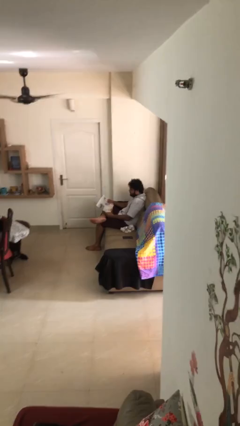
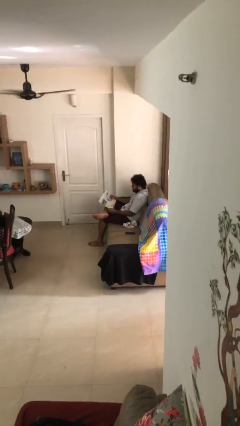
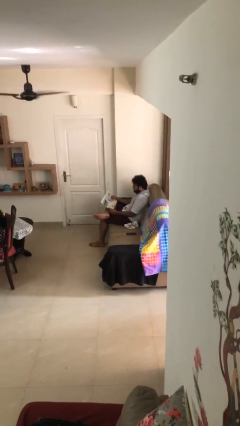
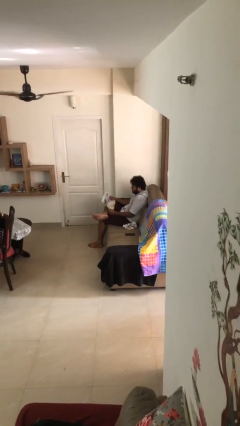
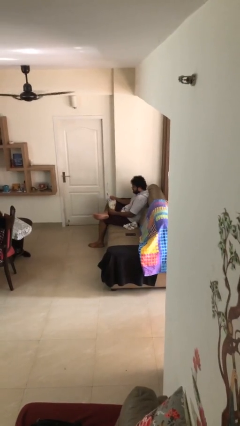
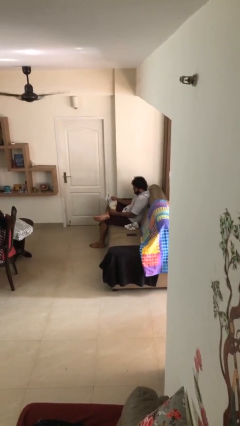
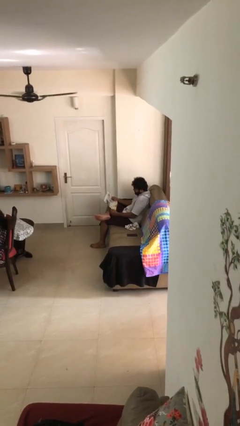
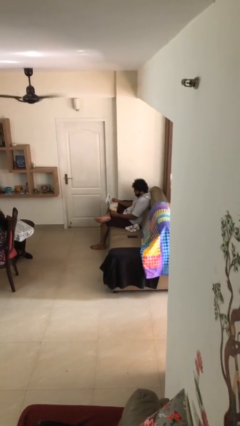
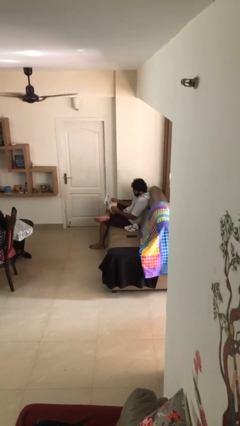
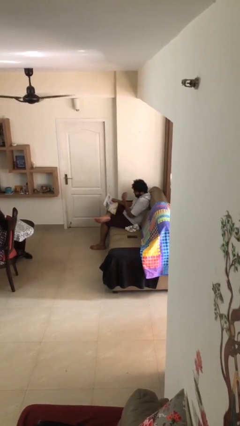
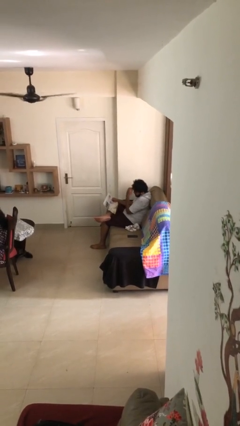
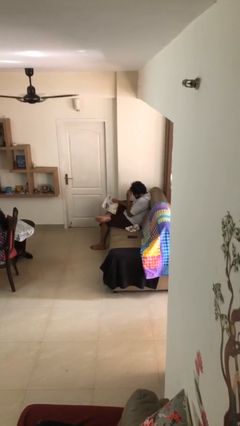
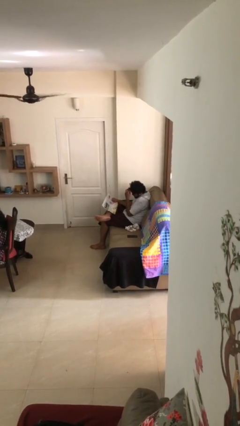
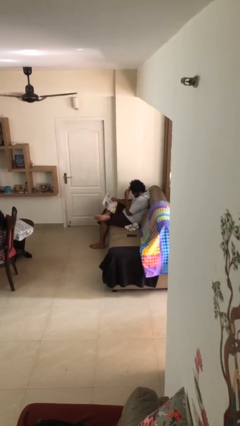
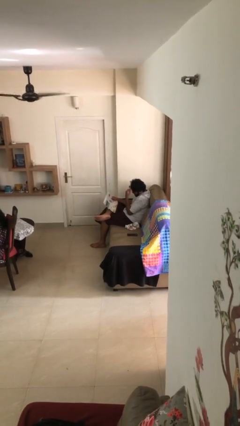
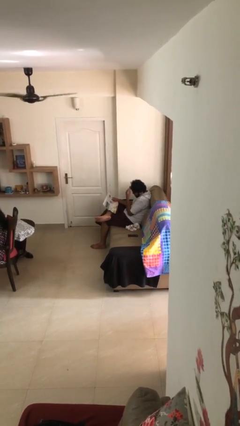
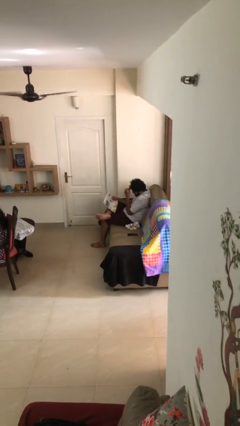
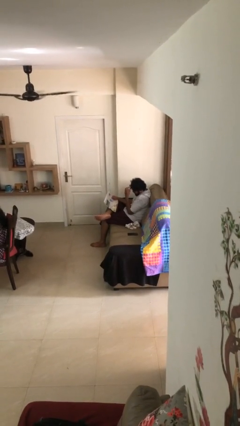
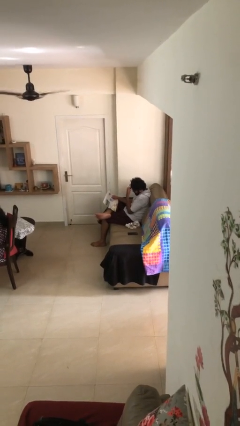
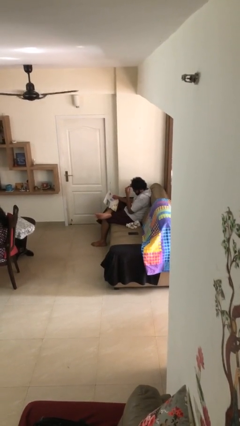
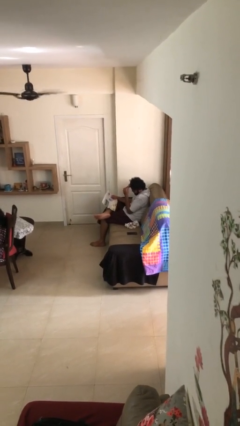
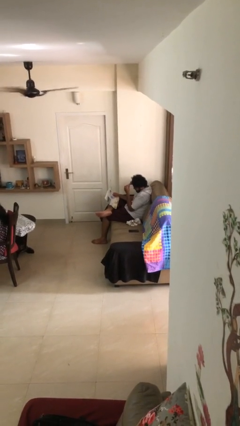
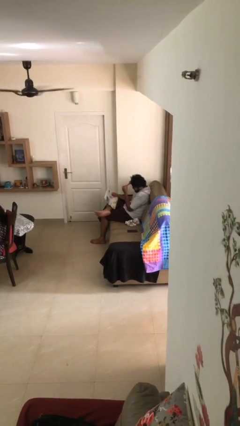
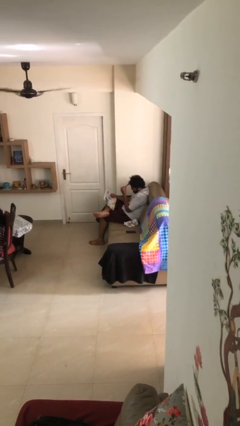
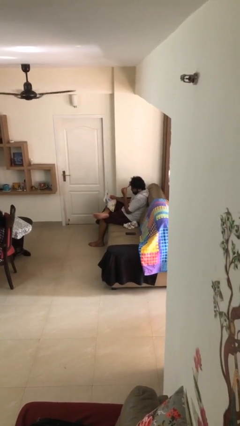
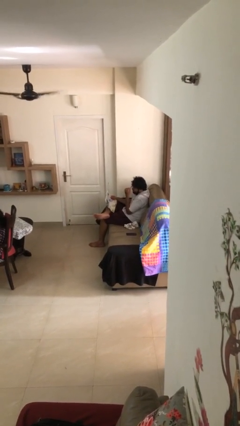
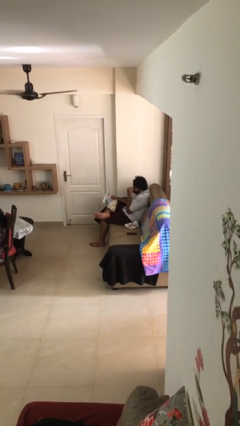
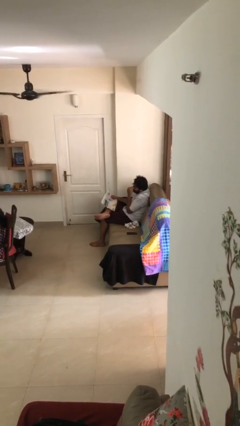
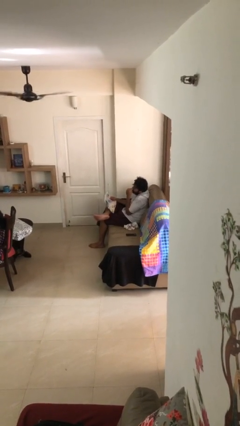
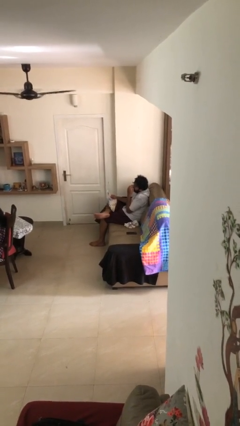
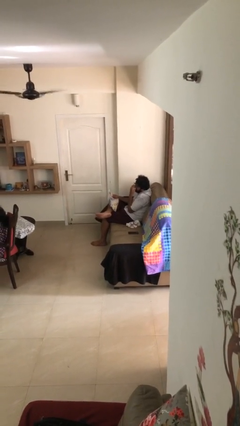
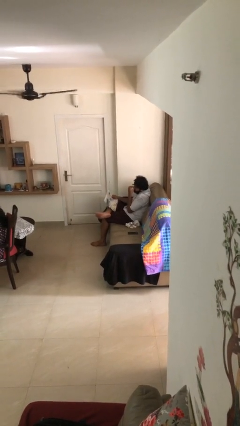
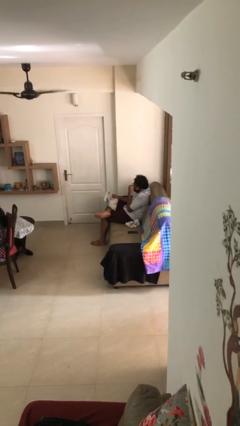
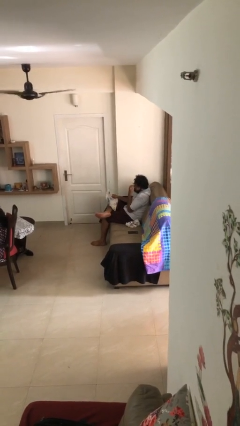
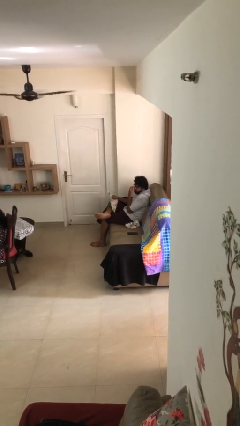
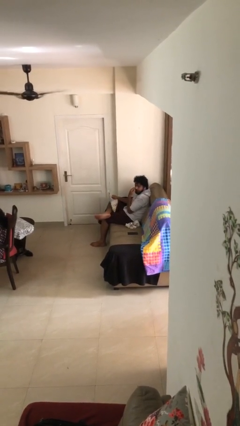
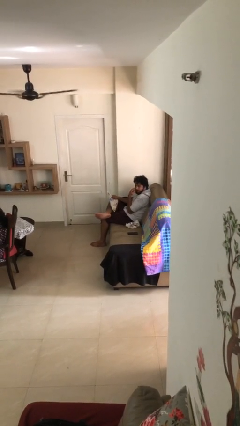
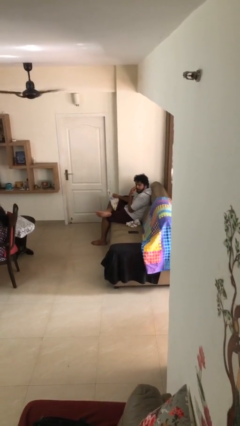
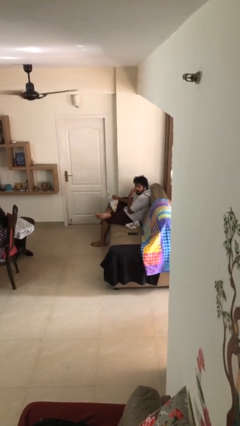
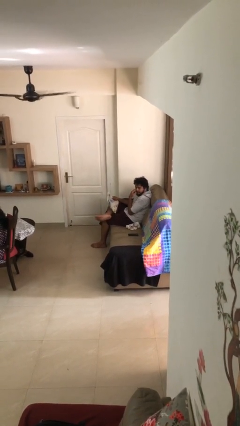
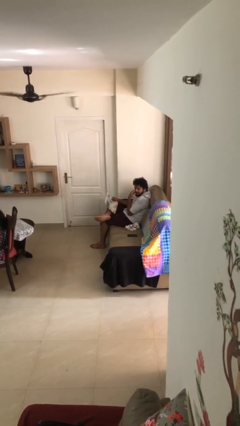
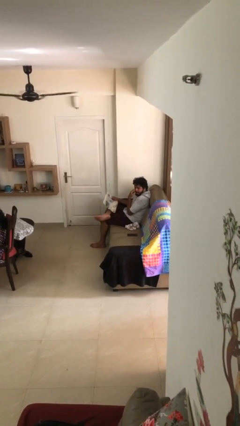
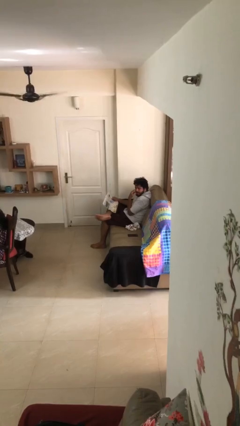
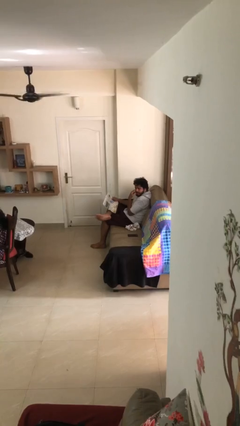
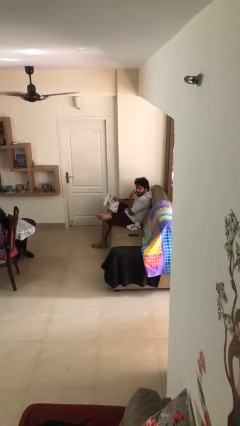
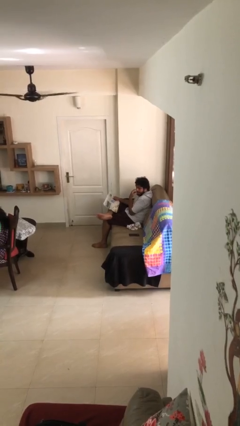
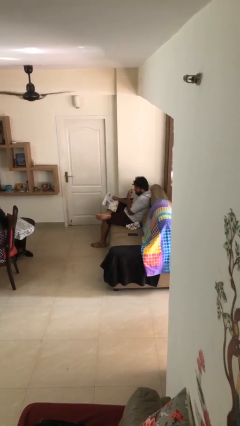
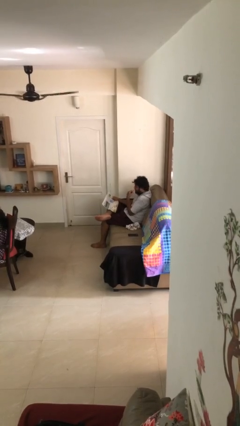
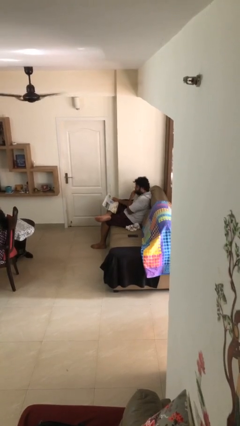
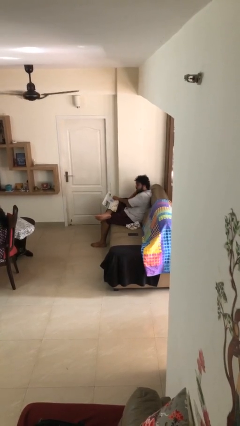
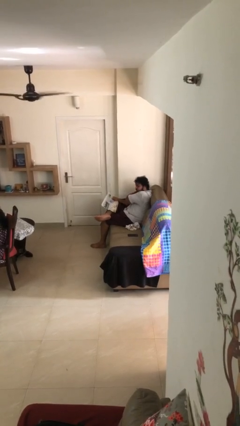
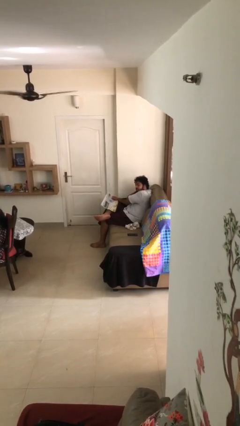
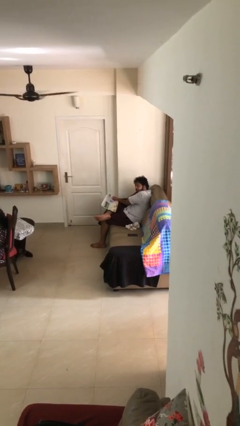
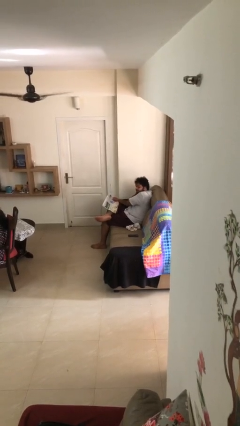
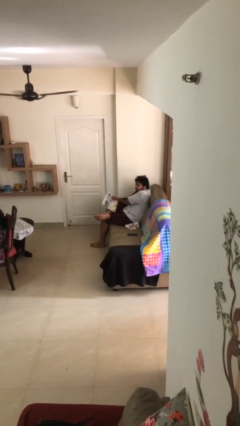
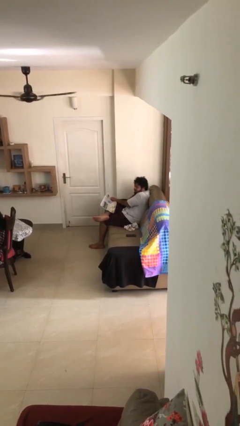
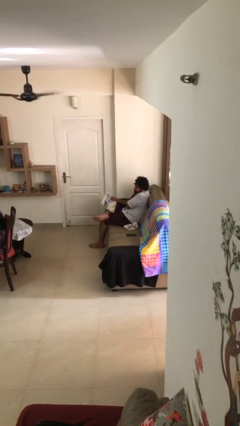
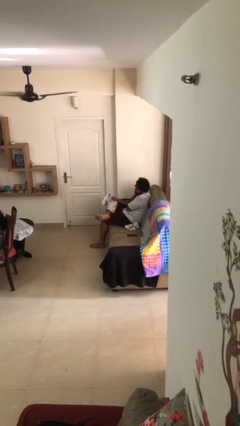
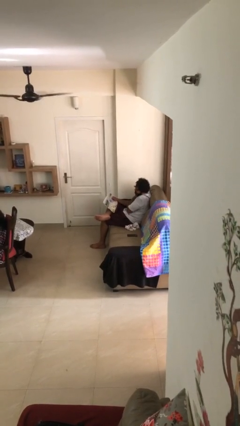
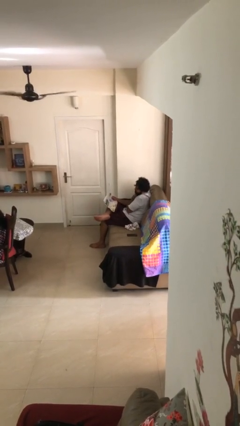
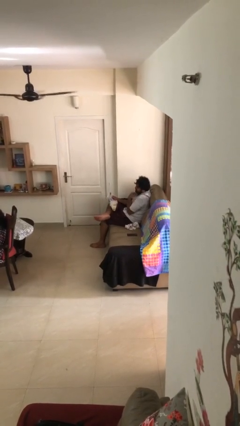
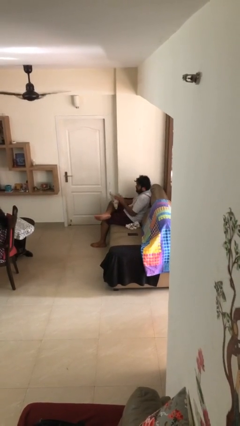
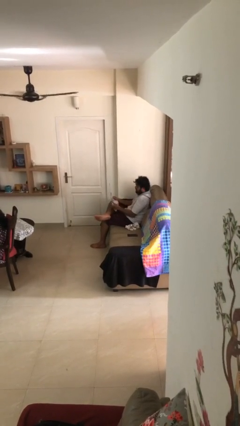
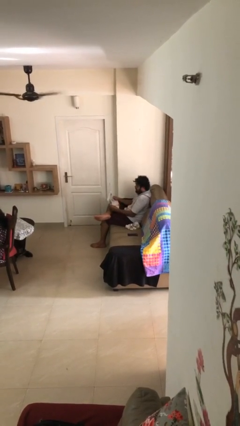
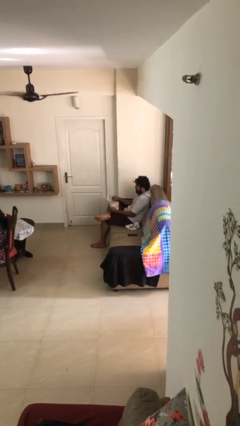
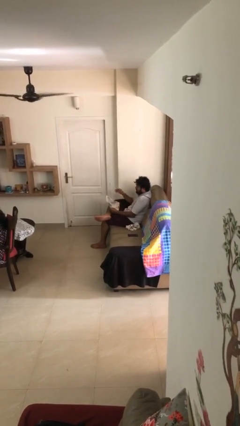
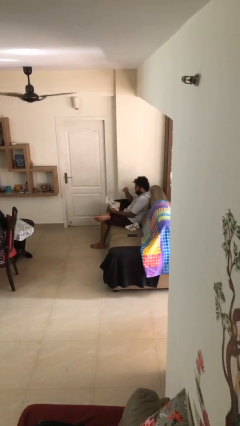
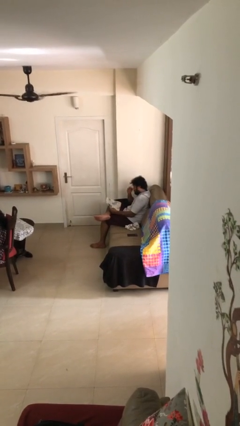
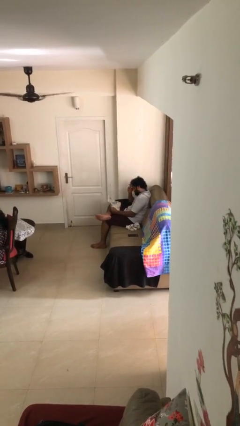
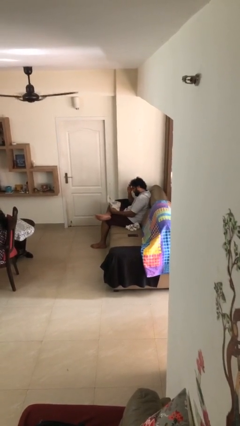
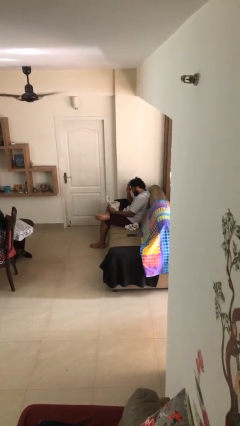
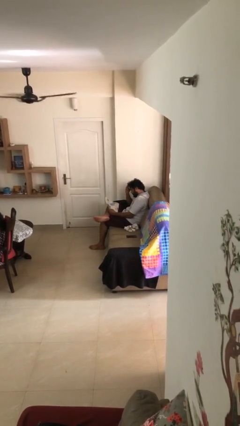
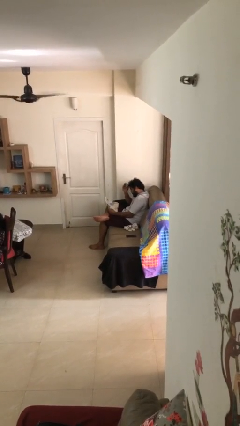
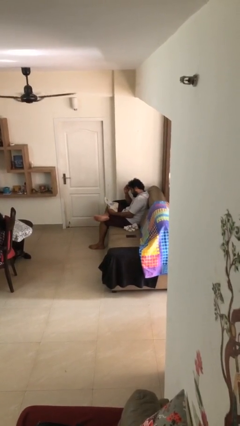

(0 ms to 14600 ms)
person reads document

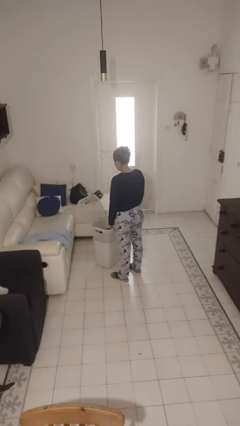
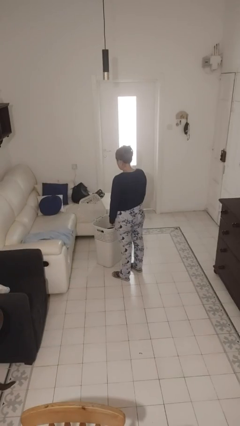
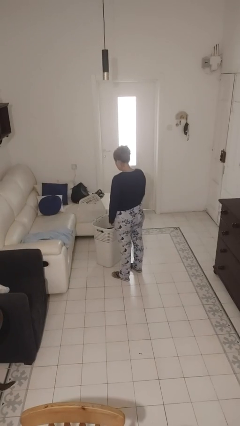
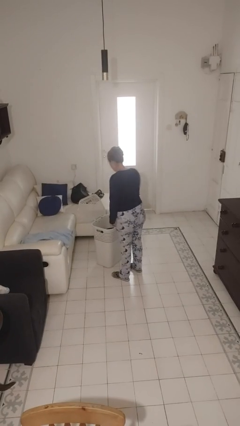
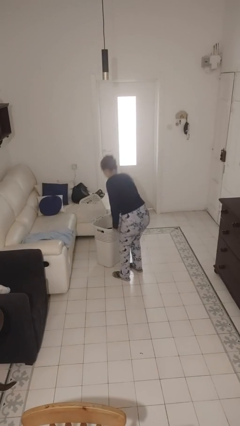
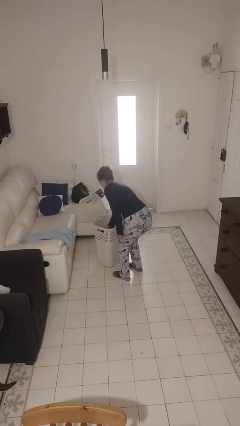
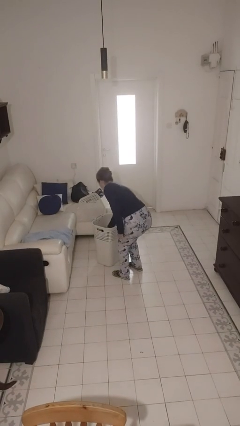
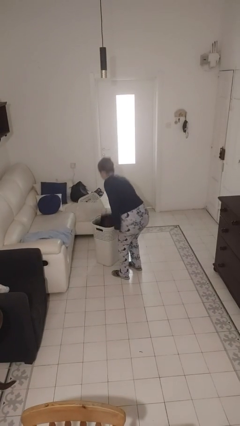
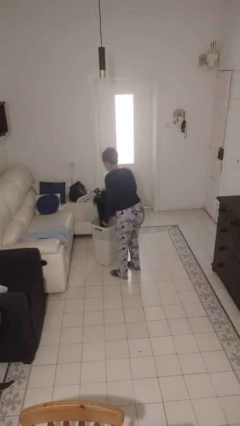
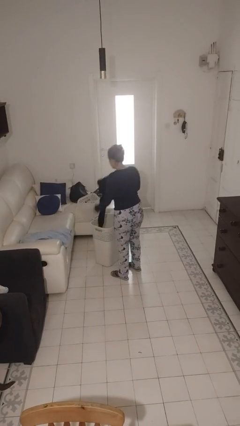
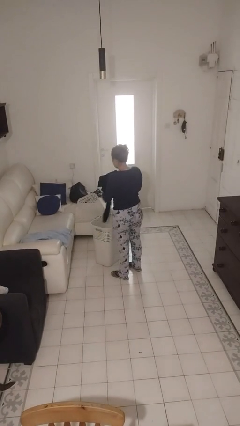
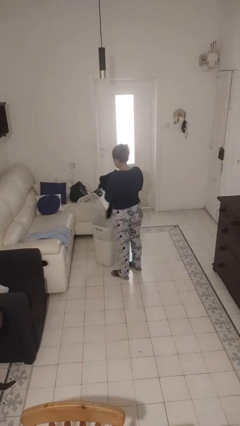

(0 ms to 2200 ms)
person takes object from basket

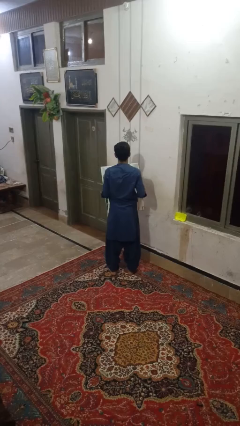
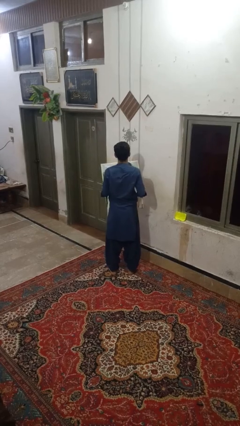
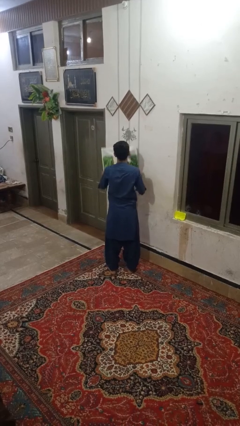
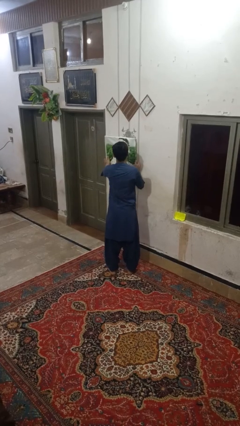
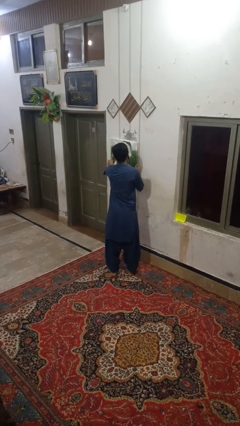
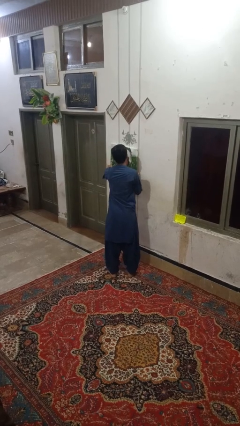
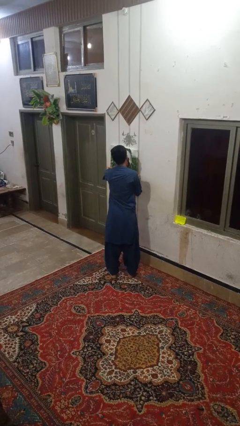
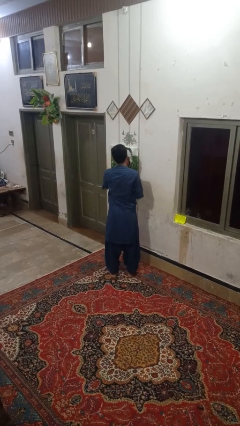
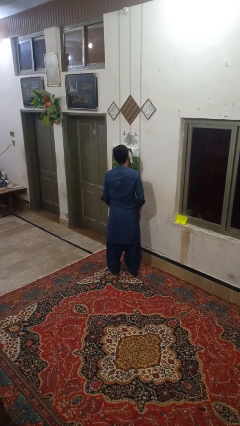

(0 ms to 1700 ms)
person puts up picture frame
